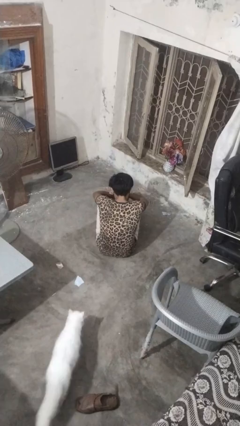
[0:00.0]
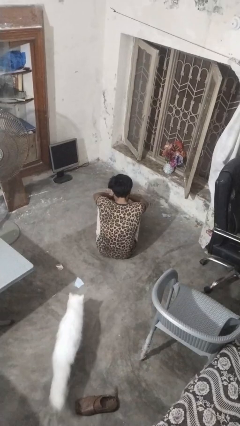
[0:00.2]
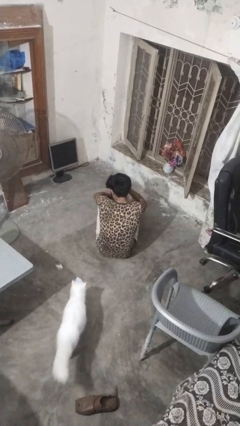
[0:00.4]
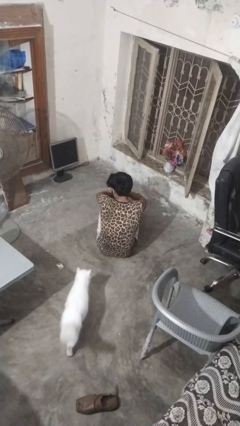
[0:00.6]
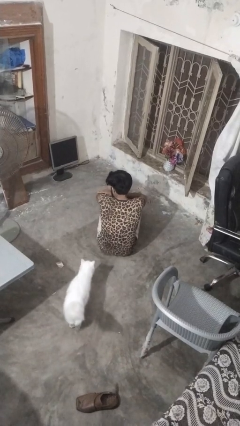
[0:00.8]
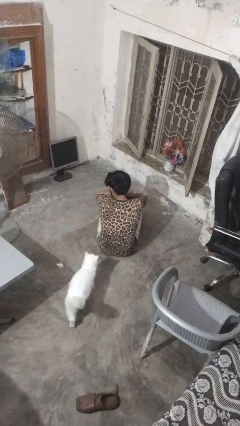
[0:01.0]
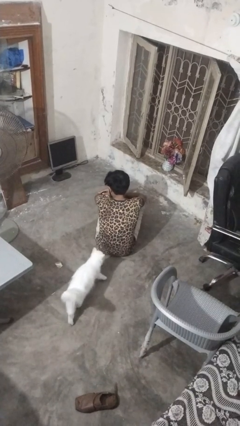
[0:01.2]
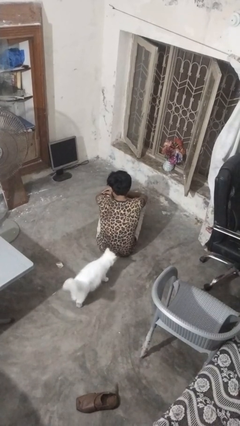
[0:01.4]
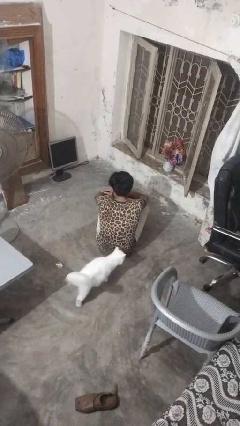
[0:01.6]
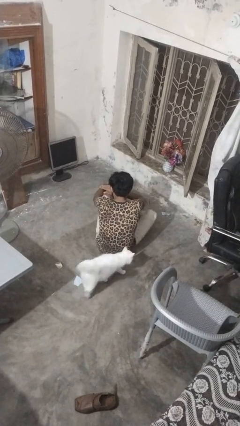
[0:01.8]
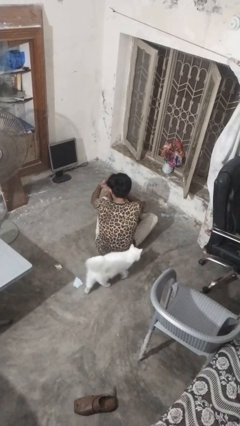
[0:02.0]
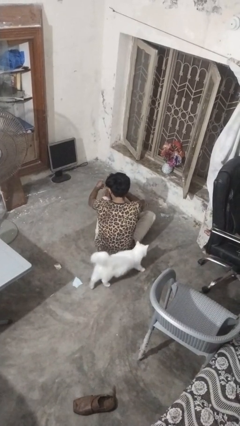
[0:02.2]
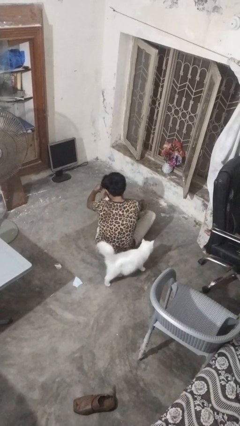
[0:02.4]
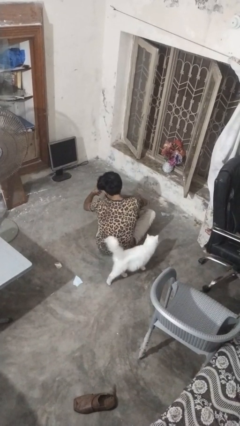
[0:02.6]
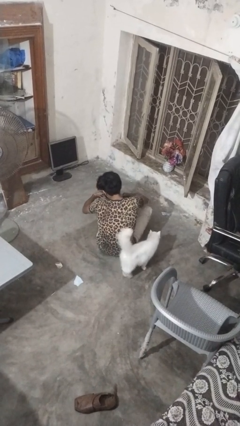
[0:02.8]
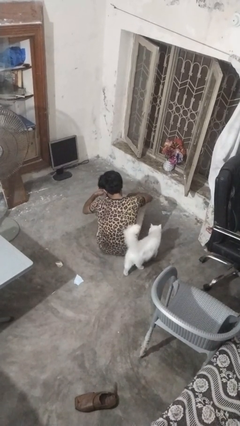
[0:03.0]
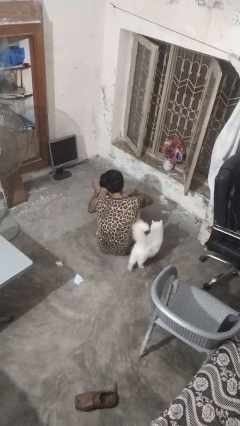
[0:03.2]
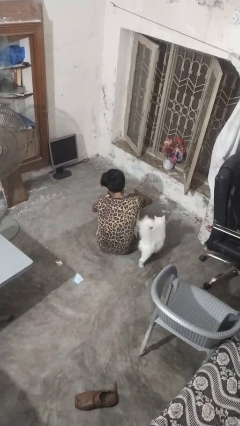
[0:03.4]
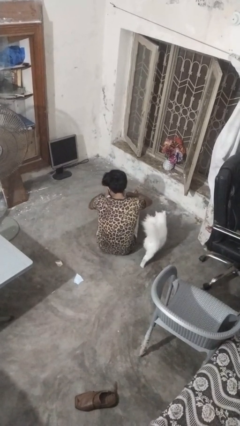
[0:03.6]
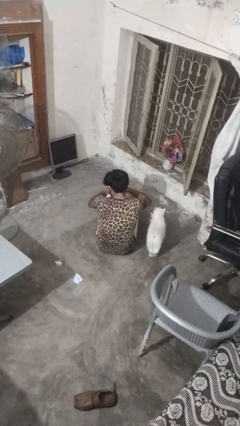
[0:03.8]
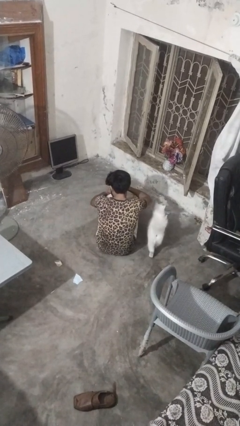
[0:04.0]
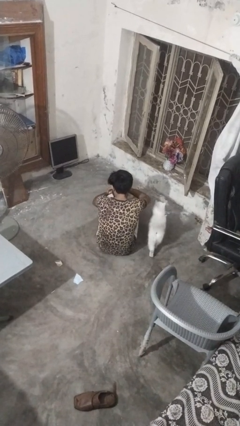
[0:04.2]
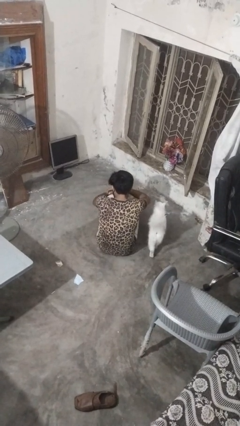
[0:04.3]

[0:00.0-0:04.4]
person swats bug

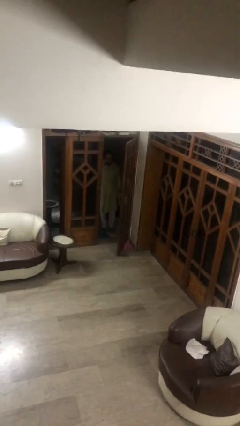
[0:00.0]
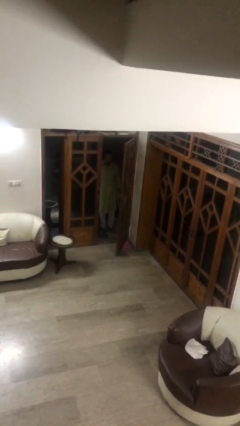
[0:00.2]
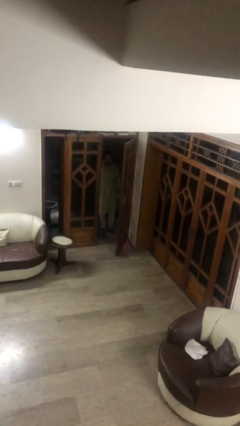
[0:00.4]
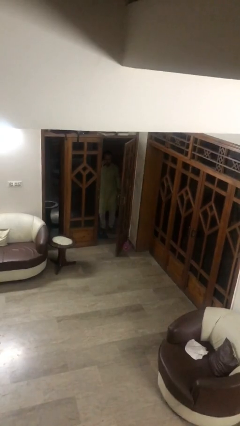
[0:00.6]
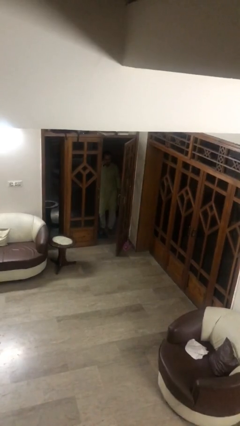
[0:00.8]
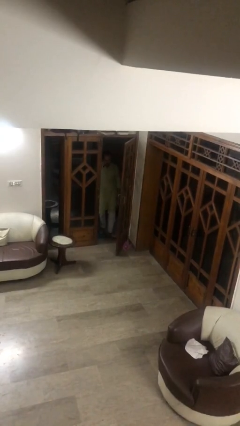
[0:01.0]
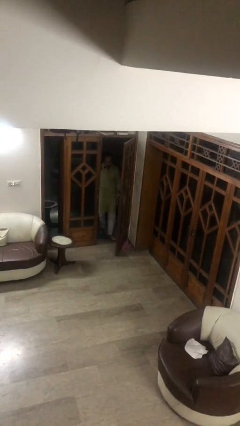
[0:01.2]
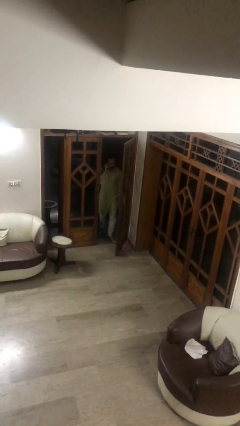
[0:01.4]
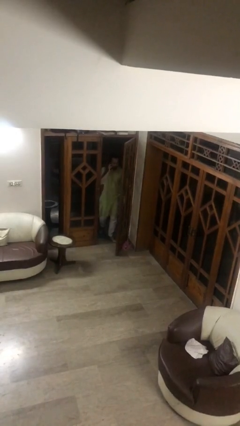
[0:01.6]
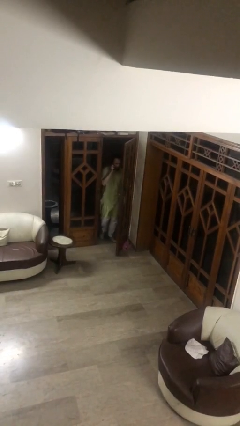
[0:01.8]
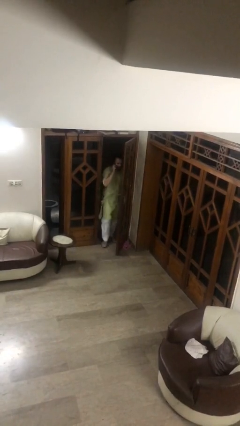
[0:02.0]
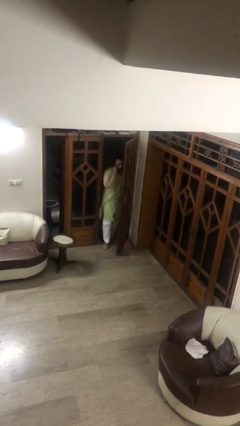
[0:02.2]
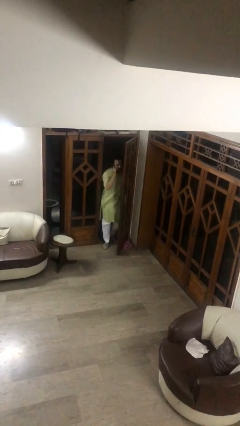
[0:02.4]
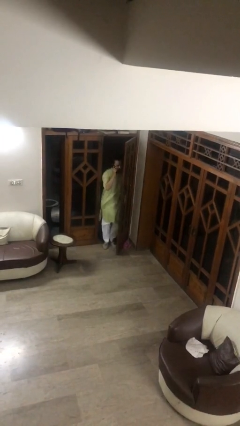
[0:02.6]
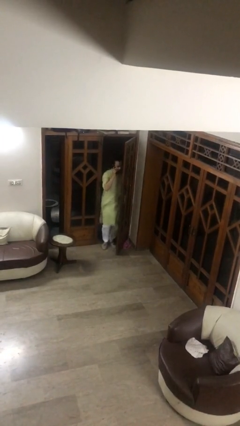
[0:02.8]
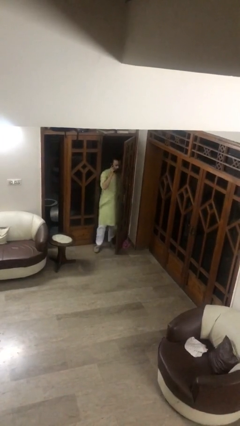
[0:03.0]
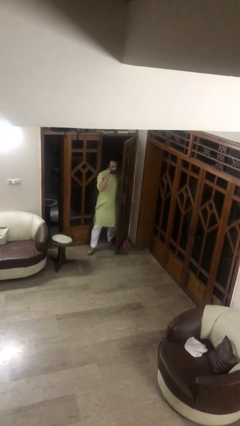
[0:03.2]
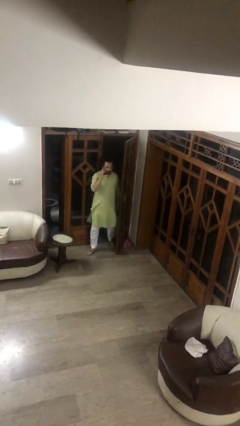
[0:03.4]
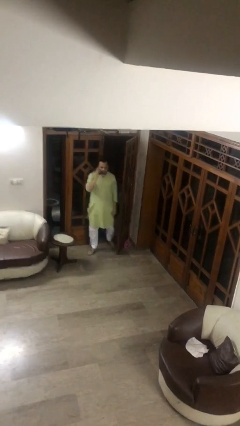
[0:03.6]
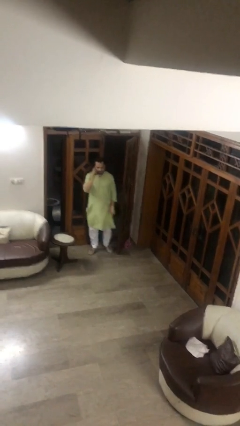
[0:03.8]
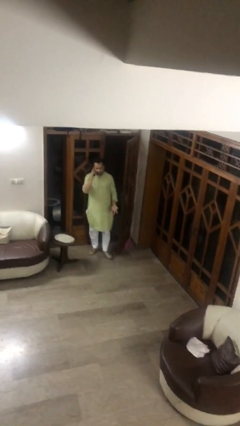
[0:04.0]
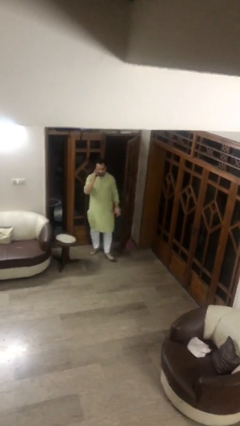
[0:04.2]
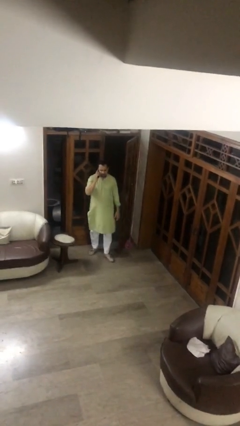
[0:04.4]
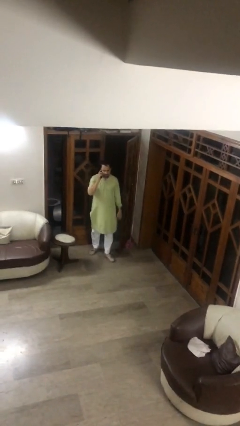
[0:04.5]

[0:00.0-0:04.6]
person enters scene through structure

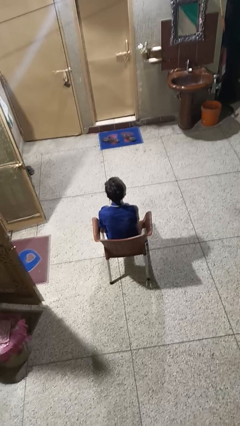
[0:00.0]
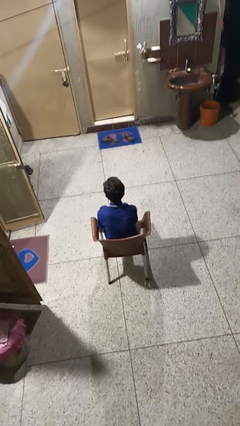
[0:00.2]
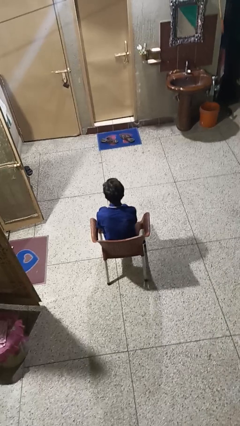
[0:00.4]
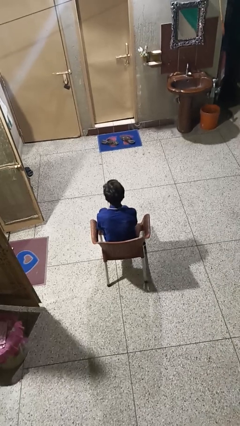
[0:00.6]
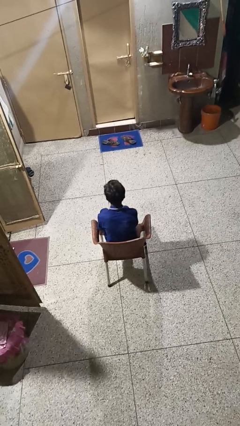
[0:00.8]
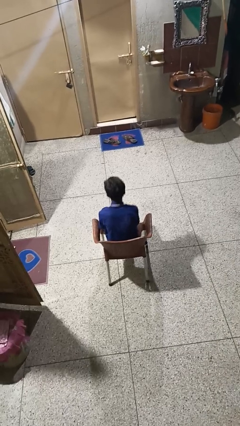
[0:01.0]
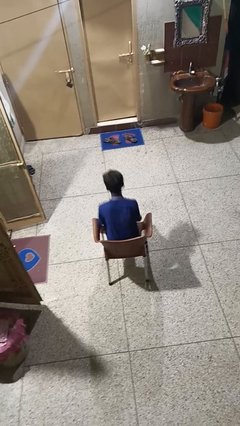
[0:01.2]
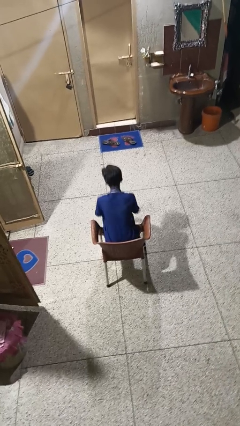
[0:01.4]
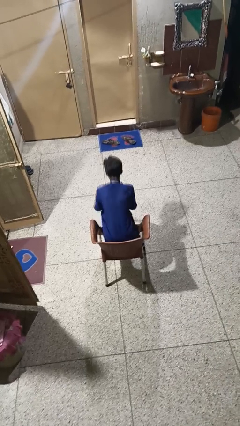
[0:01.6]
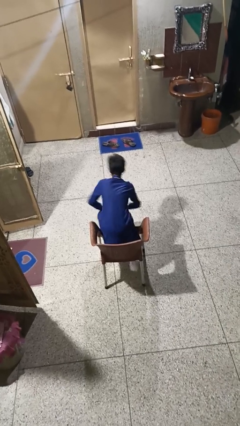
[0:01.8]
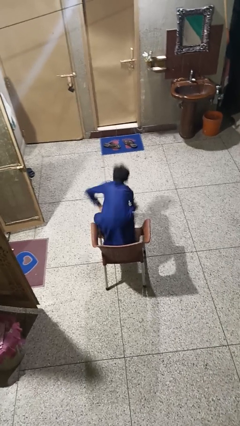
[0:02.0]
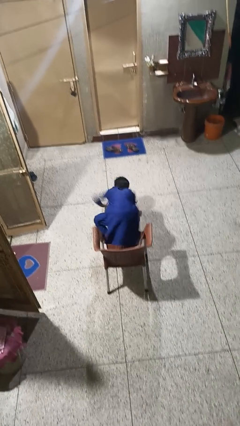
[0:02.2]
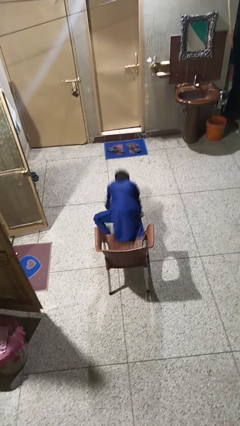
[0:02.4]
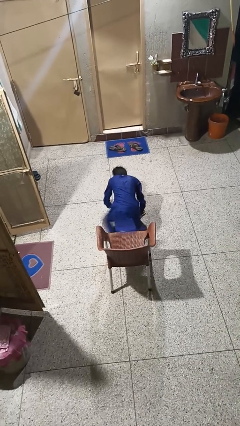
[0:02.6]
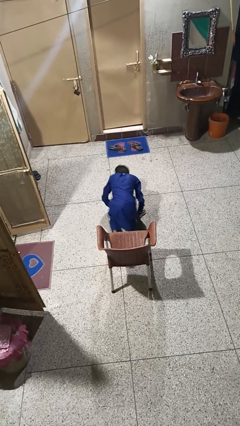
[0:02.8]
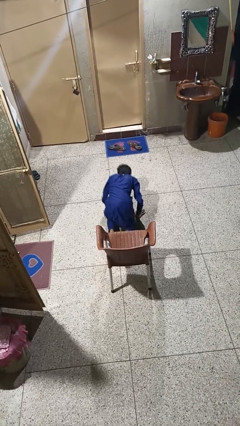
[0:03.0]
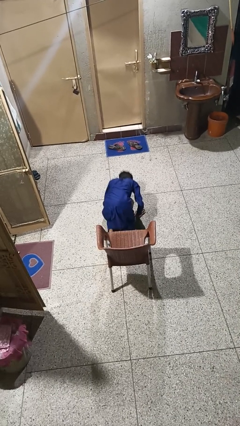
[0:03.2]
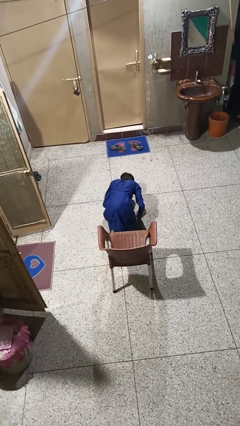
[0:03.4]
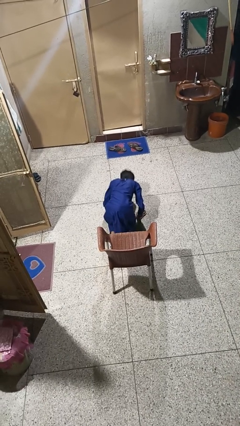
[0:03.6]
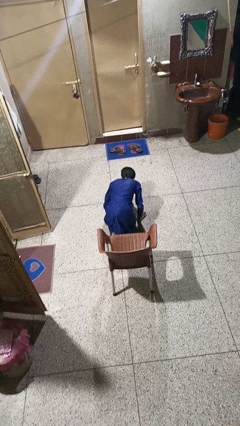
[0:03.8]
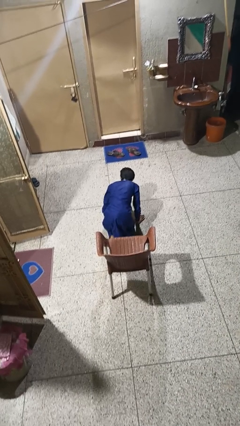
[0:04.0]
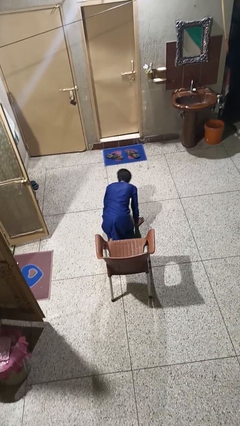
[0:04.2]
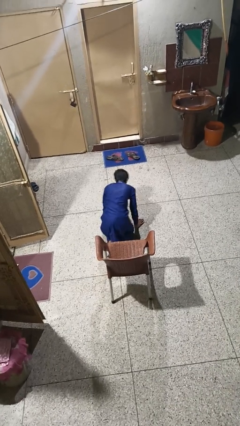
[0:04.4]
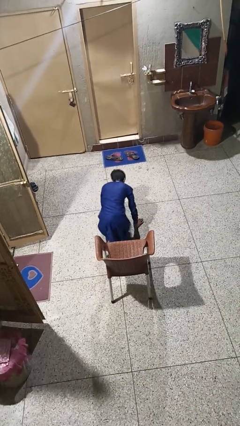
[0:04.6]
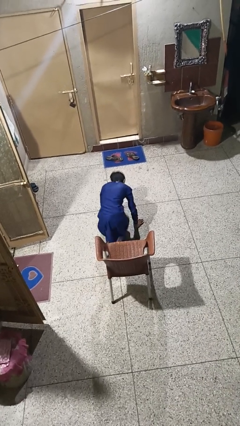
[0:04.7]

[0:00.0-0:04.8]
person falls from chair

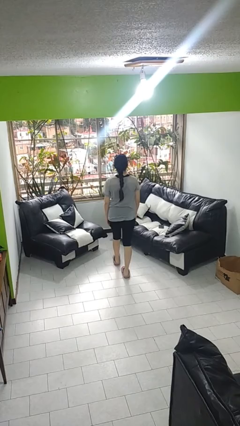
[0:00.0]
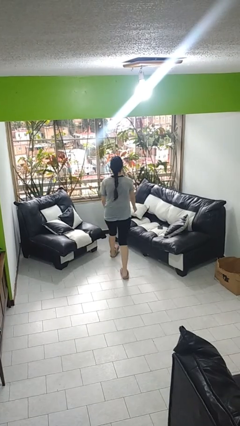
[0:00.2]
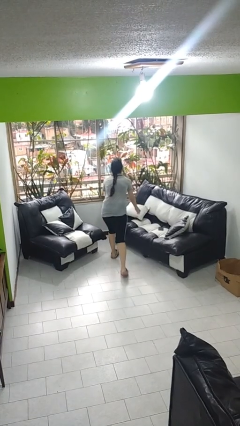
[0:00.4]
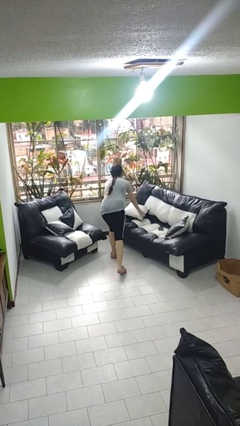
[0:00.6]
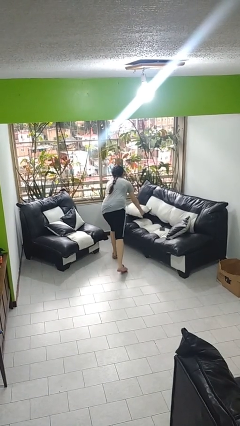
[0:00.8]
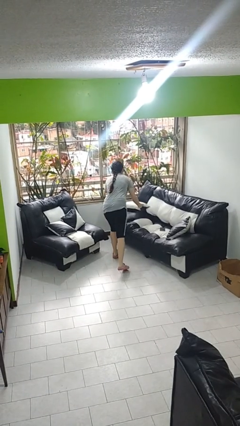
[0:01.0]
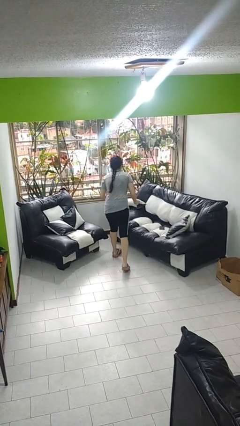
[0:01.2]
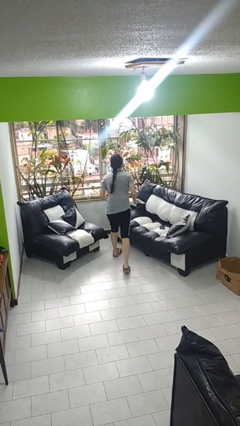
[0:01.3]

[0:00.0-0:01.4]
person picks up object from couch

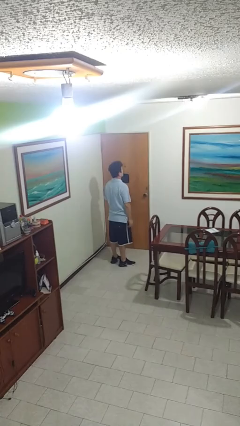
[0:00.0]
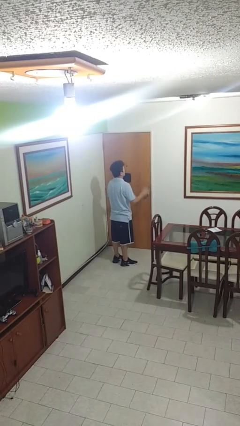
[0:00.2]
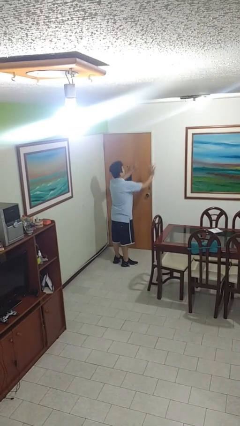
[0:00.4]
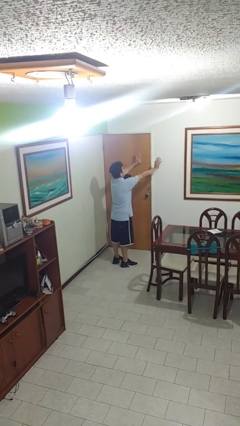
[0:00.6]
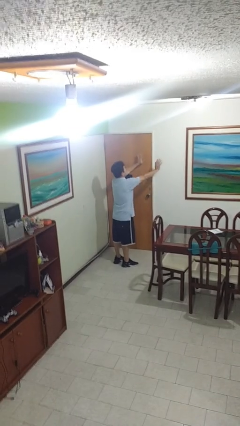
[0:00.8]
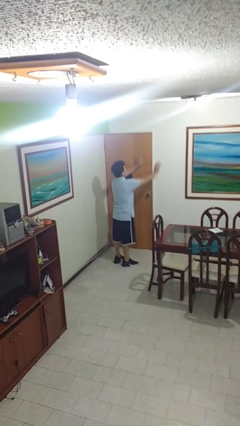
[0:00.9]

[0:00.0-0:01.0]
person gestures stop

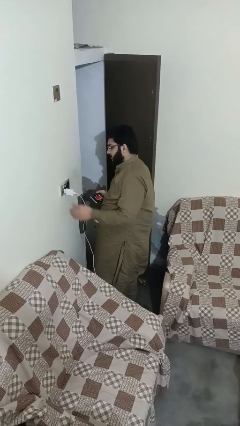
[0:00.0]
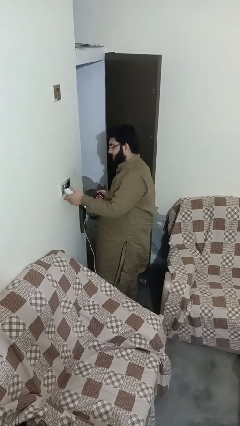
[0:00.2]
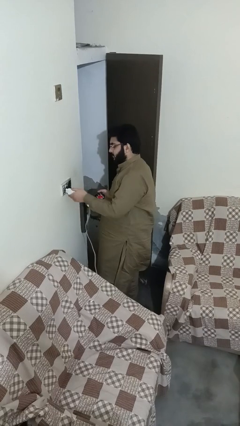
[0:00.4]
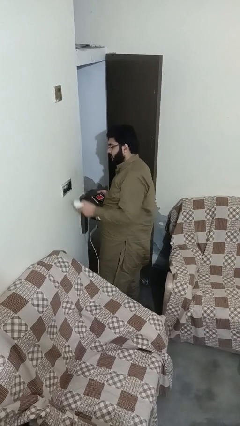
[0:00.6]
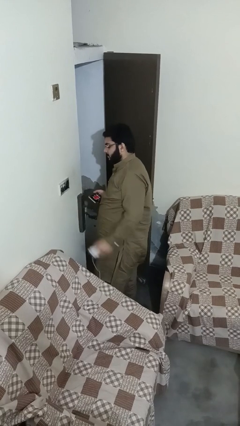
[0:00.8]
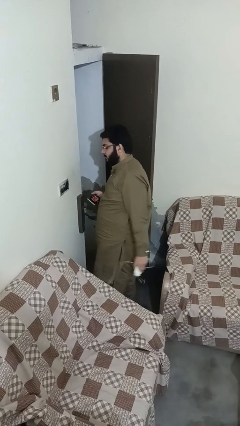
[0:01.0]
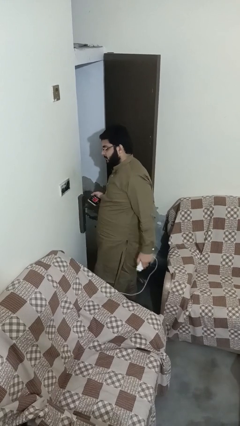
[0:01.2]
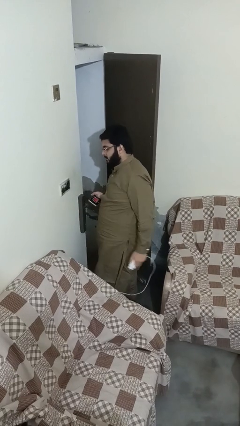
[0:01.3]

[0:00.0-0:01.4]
person unplugs from electrical socket
